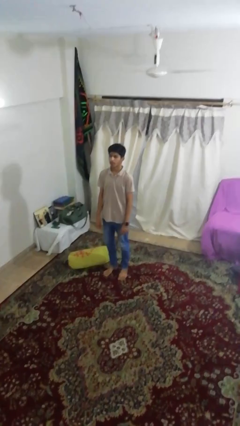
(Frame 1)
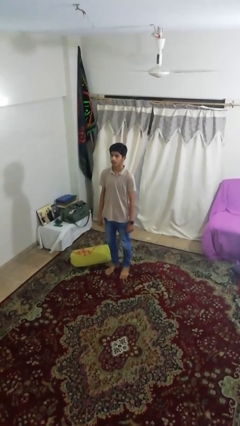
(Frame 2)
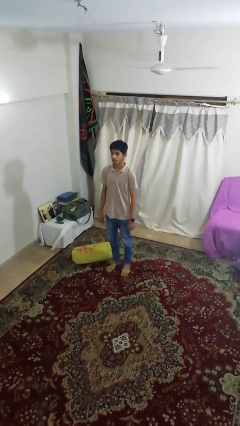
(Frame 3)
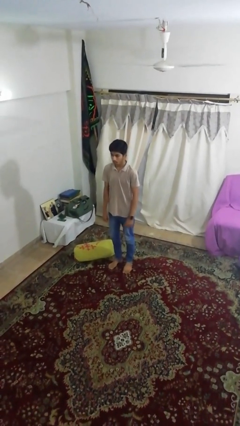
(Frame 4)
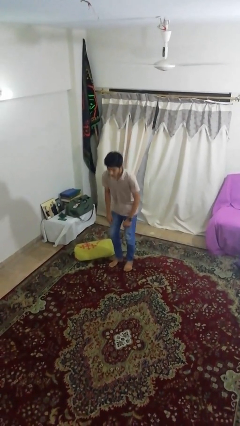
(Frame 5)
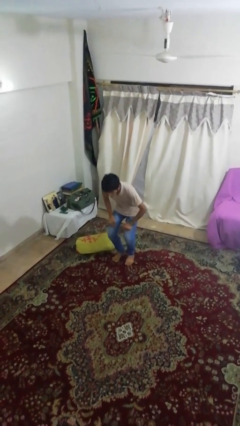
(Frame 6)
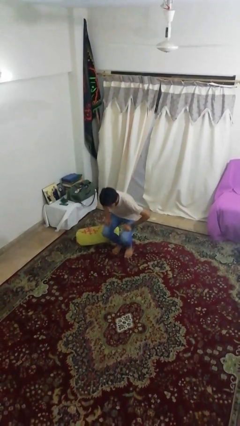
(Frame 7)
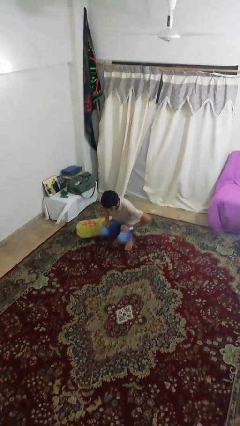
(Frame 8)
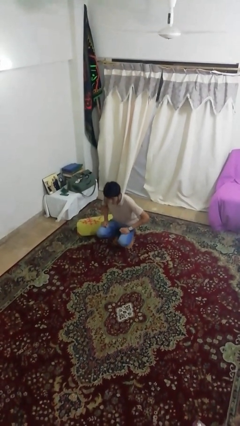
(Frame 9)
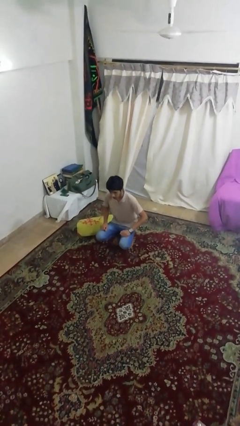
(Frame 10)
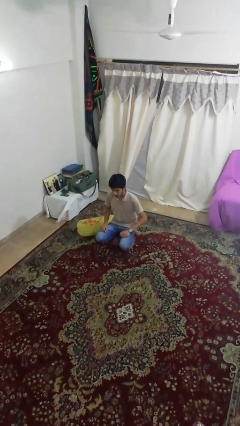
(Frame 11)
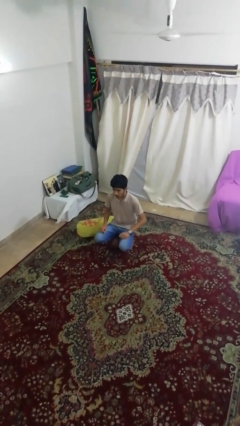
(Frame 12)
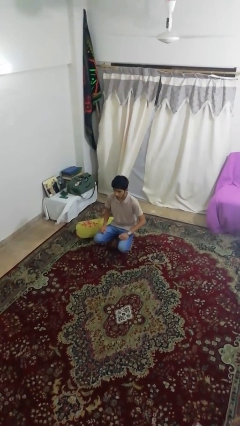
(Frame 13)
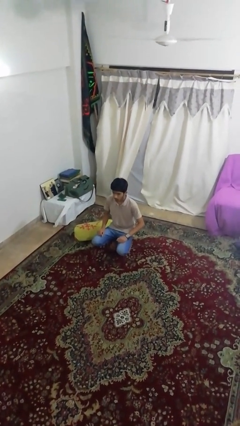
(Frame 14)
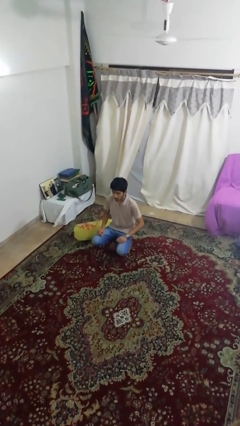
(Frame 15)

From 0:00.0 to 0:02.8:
person squats

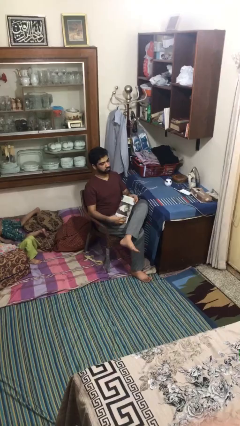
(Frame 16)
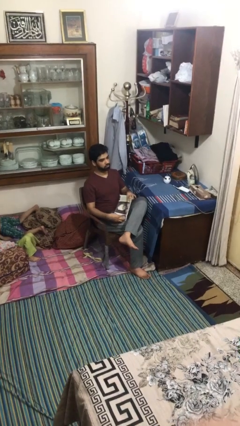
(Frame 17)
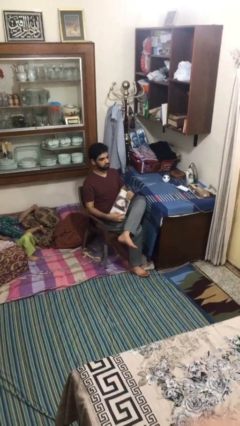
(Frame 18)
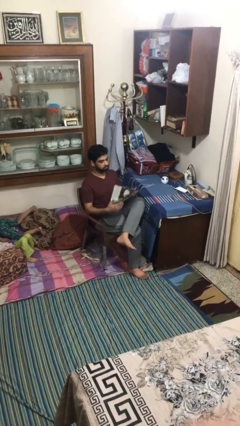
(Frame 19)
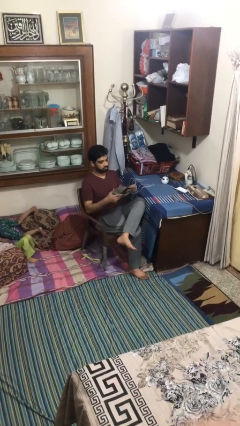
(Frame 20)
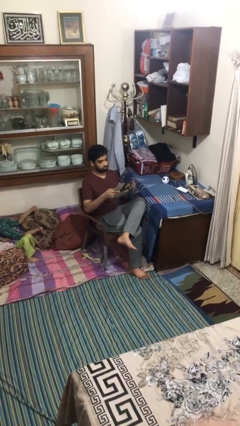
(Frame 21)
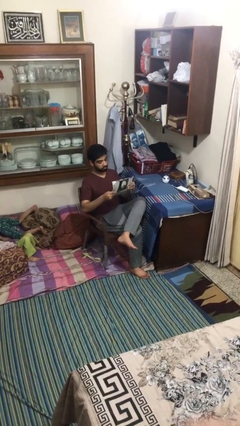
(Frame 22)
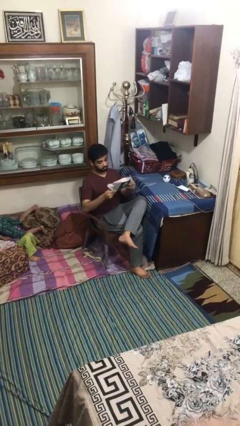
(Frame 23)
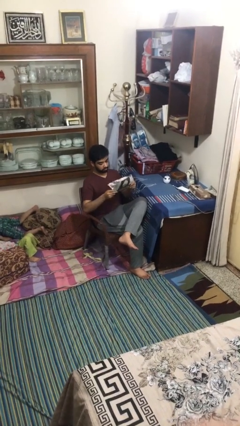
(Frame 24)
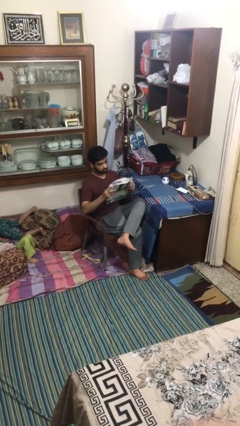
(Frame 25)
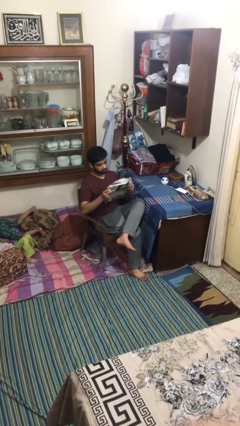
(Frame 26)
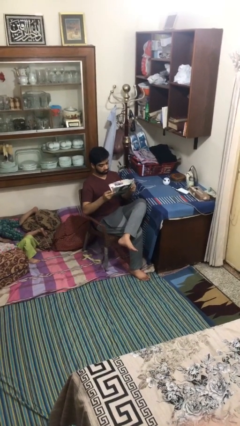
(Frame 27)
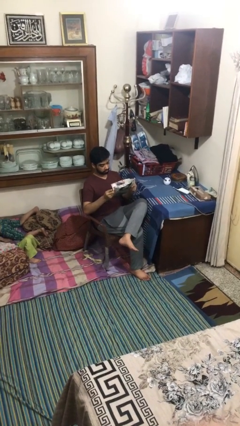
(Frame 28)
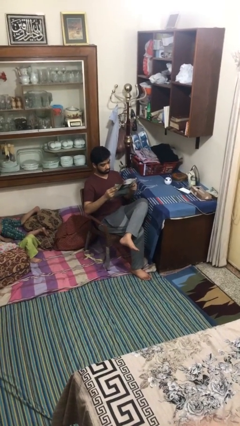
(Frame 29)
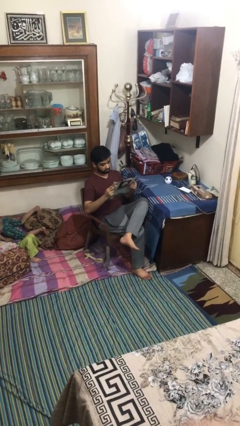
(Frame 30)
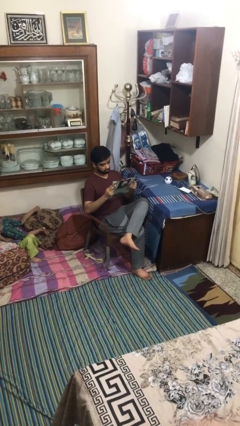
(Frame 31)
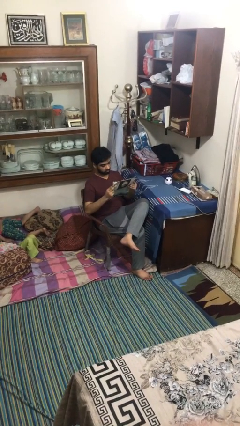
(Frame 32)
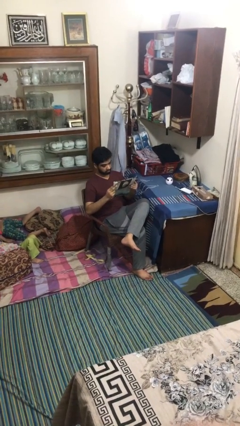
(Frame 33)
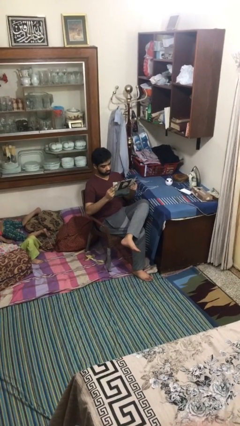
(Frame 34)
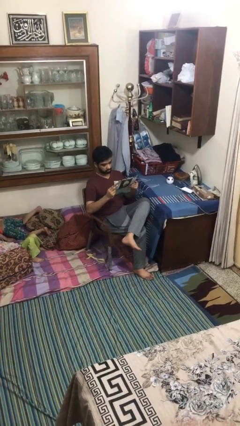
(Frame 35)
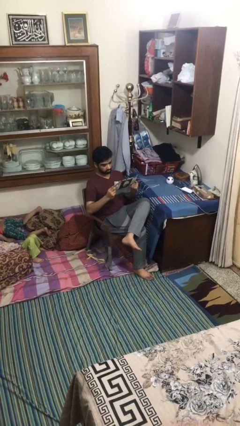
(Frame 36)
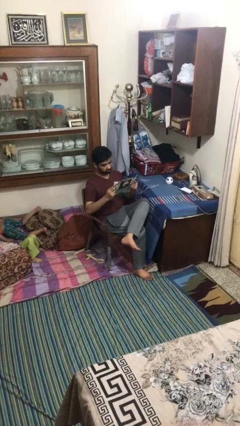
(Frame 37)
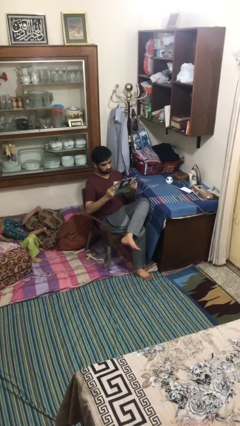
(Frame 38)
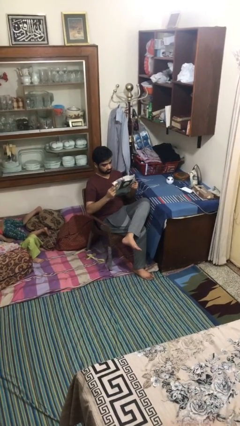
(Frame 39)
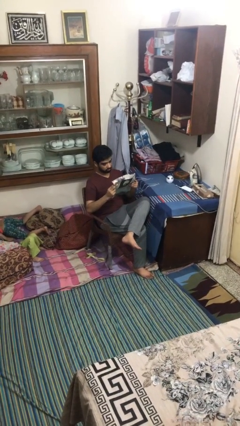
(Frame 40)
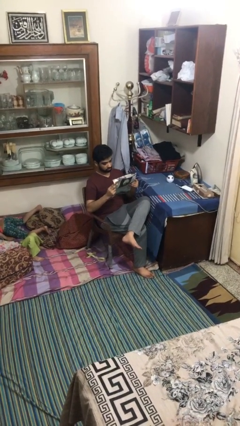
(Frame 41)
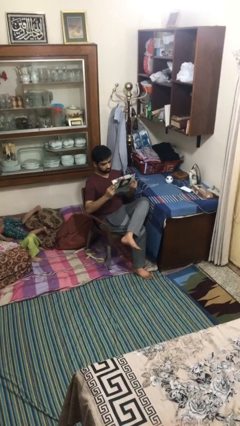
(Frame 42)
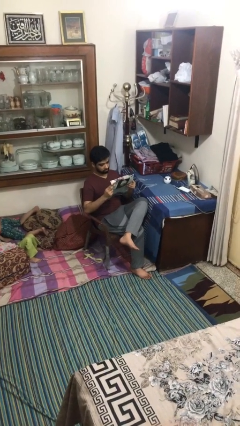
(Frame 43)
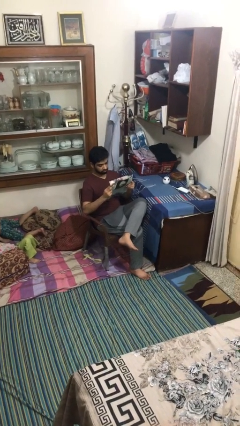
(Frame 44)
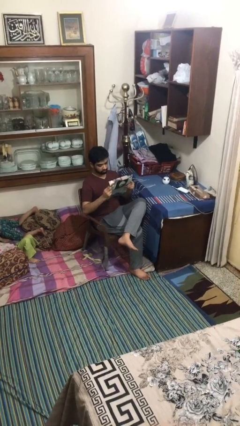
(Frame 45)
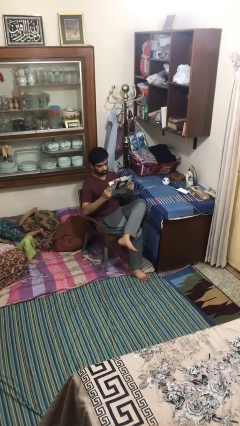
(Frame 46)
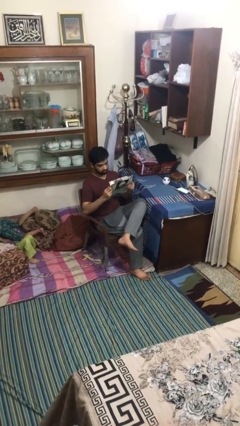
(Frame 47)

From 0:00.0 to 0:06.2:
person reads document

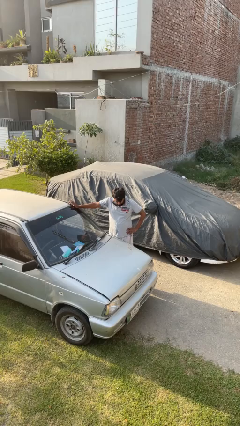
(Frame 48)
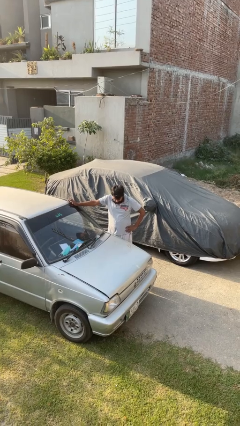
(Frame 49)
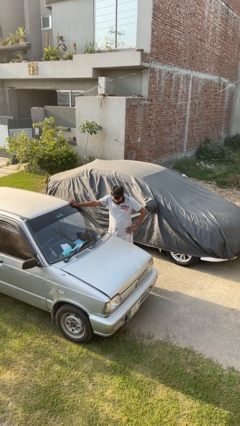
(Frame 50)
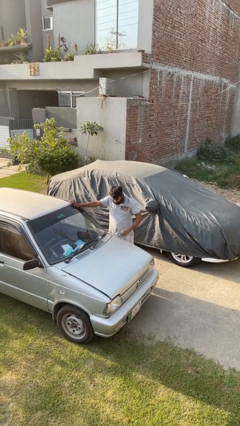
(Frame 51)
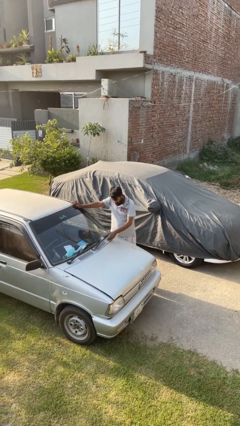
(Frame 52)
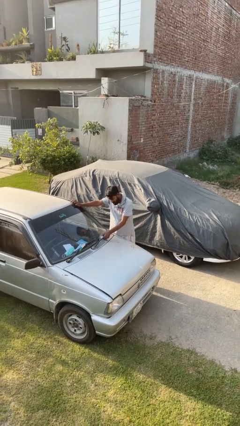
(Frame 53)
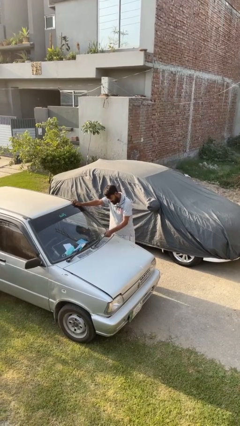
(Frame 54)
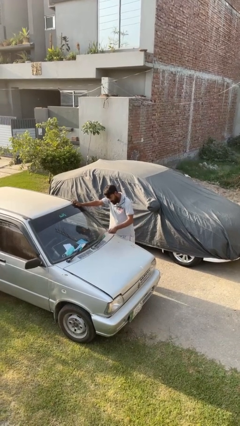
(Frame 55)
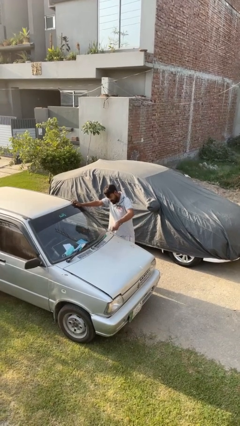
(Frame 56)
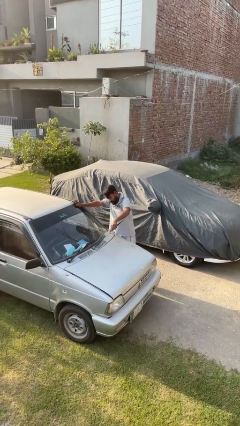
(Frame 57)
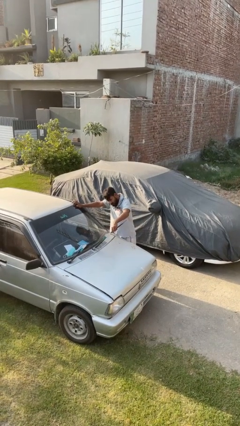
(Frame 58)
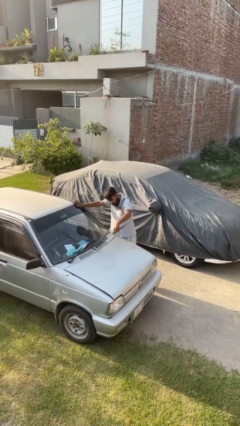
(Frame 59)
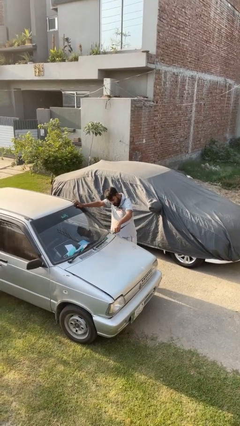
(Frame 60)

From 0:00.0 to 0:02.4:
person flips up car wipers

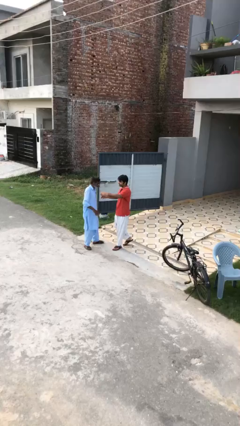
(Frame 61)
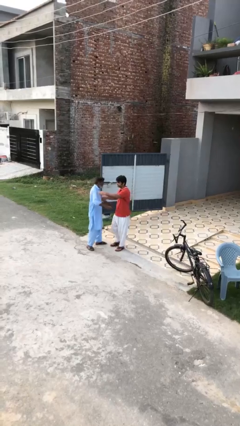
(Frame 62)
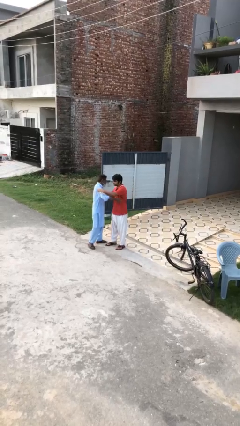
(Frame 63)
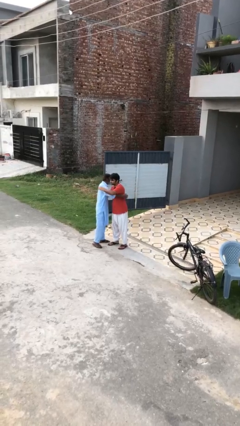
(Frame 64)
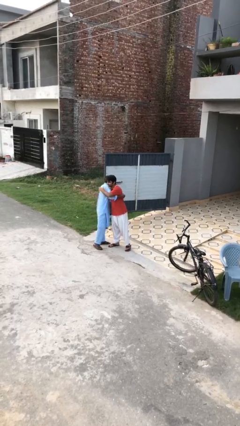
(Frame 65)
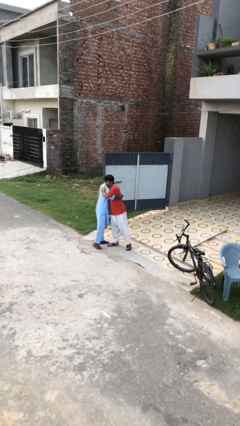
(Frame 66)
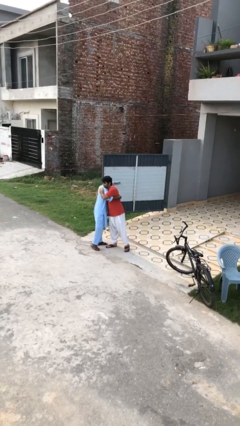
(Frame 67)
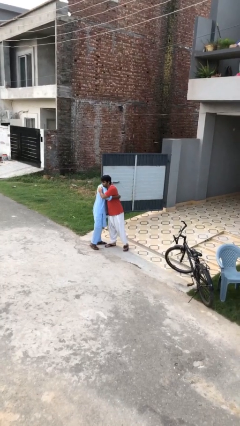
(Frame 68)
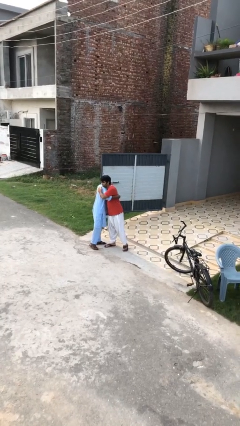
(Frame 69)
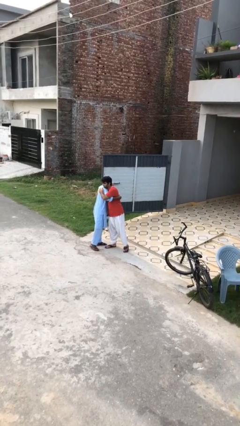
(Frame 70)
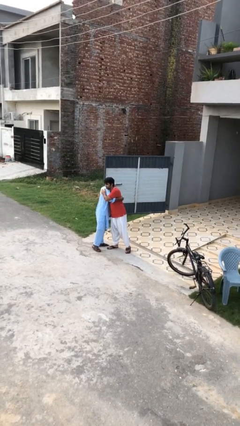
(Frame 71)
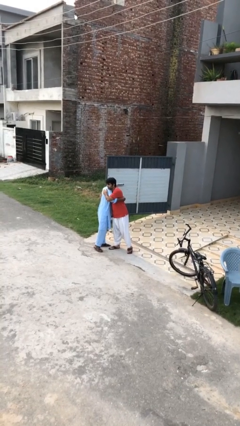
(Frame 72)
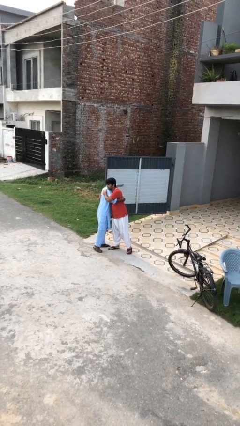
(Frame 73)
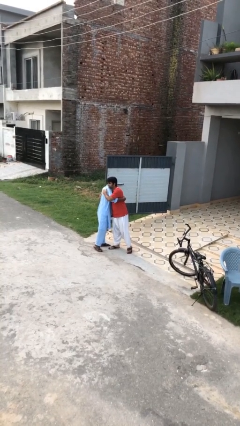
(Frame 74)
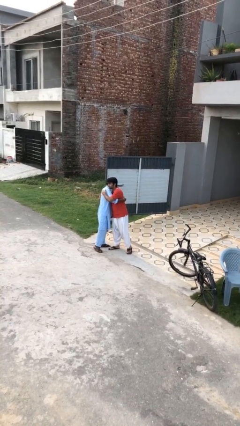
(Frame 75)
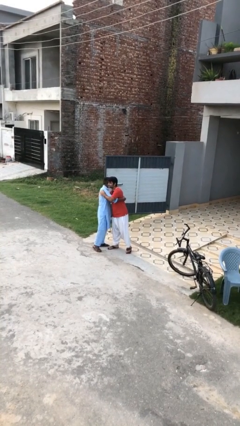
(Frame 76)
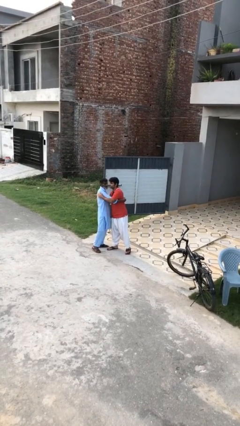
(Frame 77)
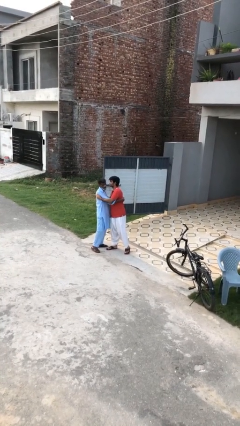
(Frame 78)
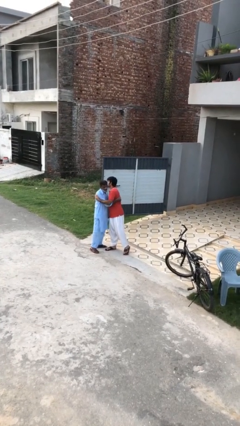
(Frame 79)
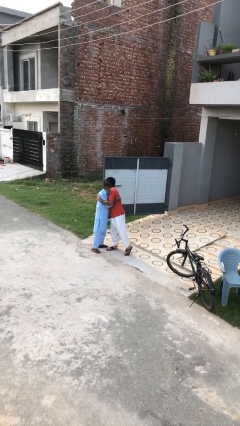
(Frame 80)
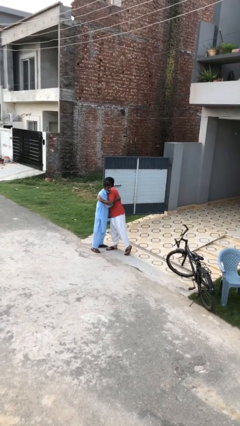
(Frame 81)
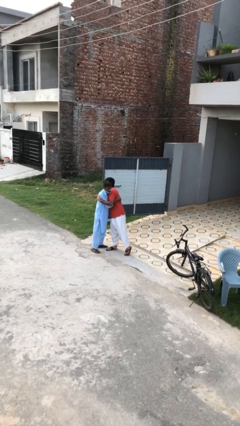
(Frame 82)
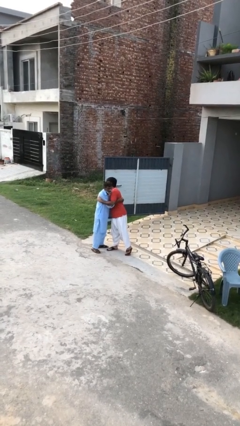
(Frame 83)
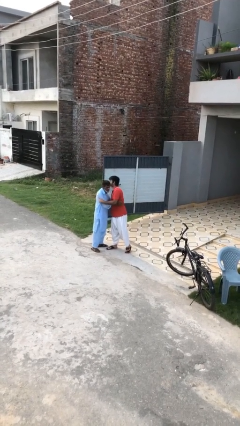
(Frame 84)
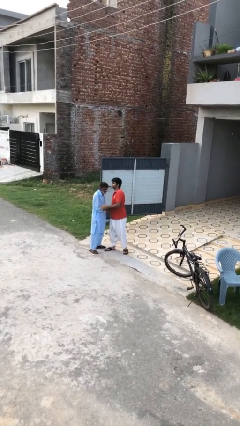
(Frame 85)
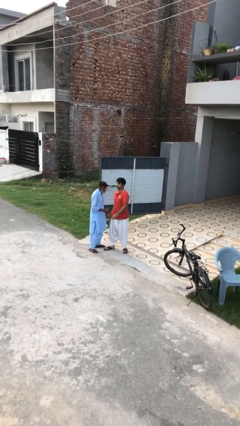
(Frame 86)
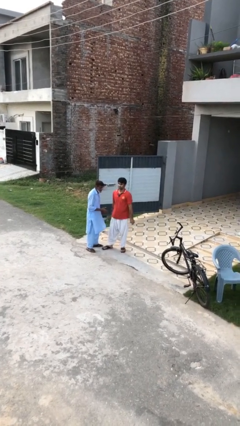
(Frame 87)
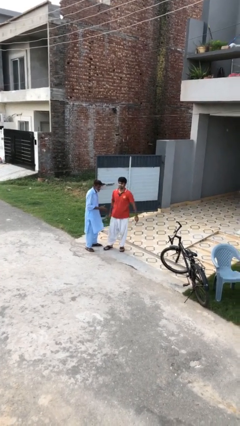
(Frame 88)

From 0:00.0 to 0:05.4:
person embraces person

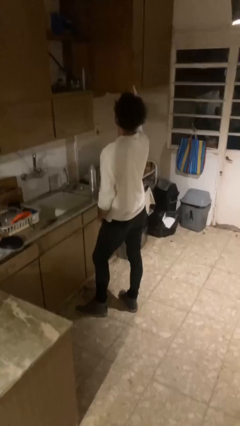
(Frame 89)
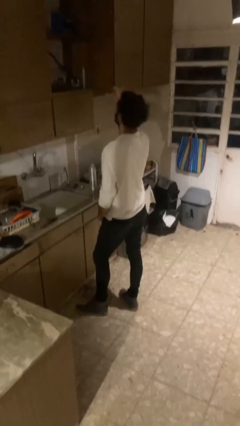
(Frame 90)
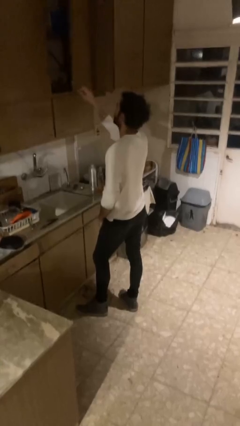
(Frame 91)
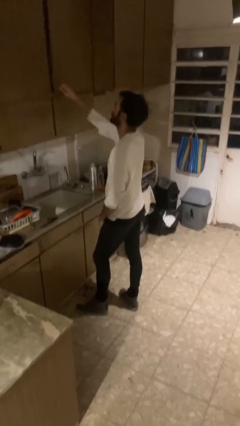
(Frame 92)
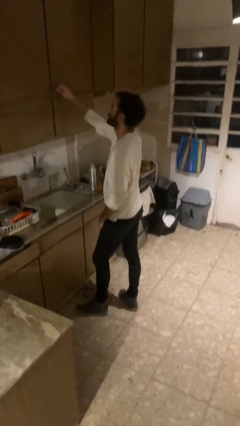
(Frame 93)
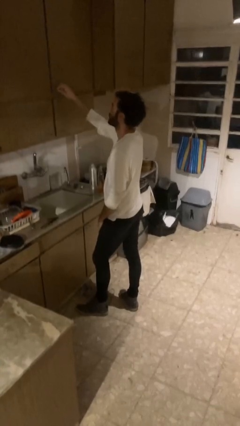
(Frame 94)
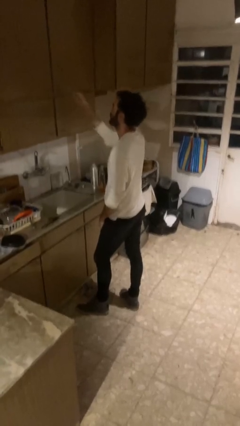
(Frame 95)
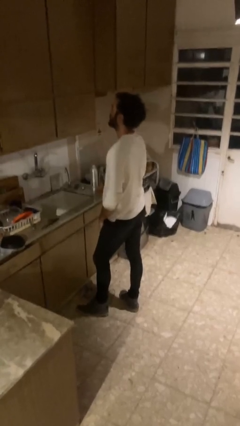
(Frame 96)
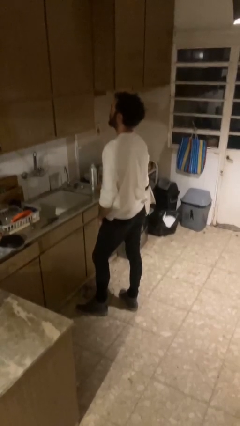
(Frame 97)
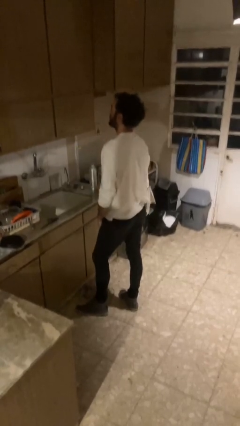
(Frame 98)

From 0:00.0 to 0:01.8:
person closes cabinet
